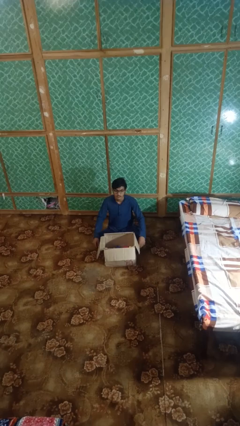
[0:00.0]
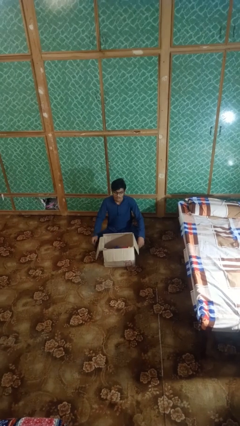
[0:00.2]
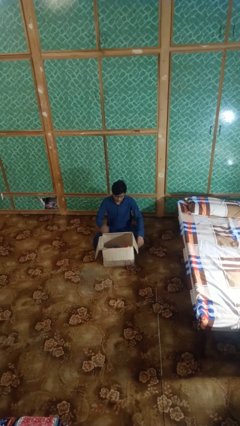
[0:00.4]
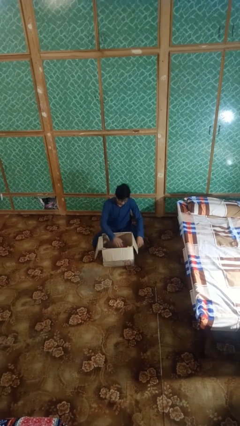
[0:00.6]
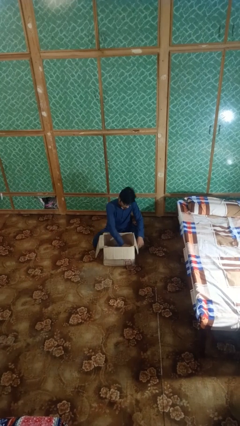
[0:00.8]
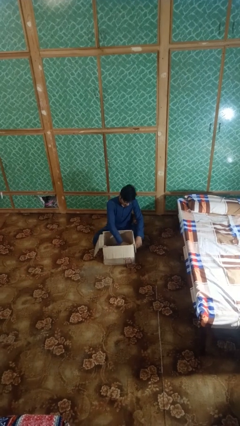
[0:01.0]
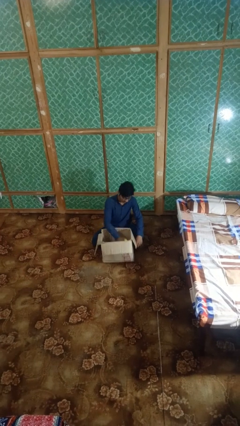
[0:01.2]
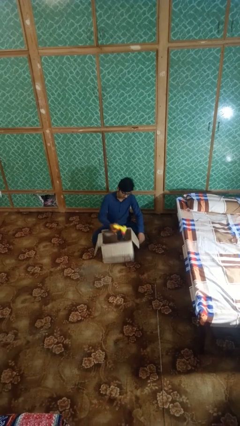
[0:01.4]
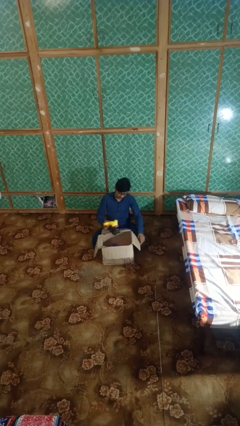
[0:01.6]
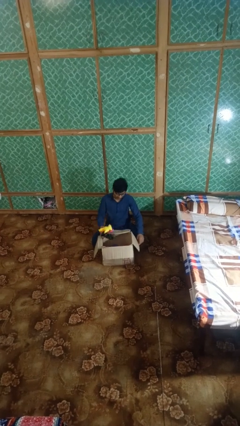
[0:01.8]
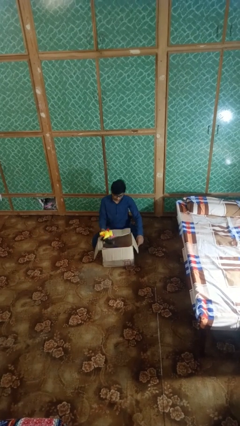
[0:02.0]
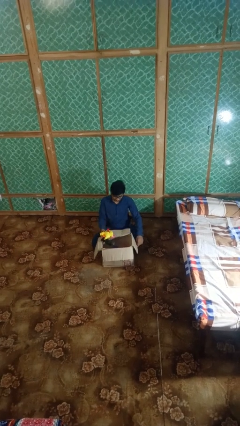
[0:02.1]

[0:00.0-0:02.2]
person takes object from box

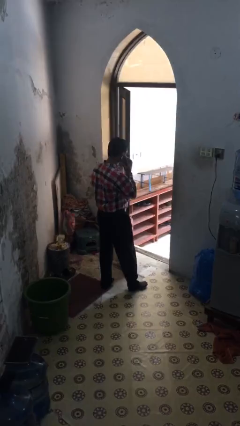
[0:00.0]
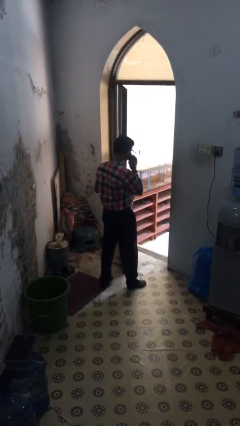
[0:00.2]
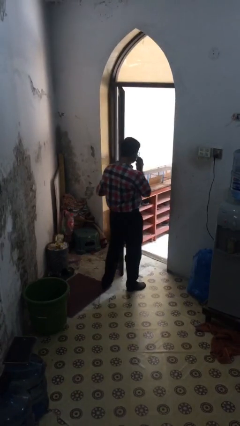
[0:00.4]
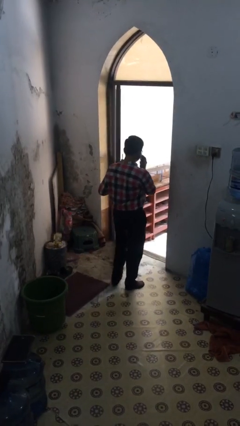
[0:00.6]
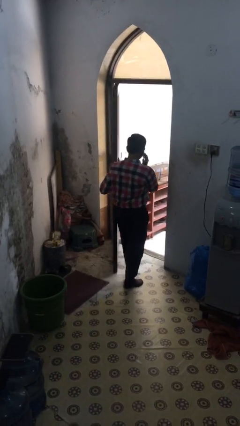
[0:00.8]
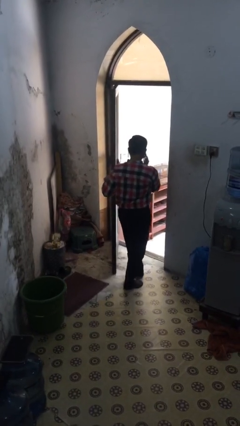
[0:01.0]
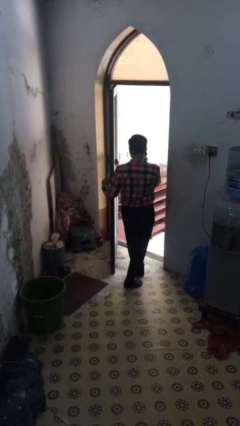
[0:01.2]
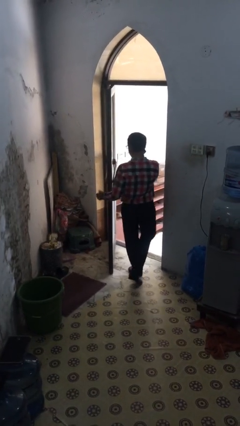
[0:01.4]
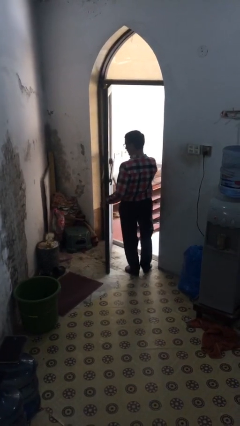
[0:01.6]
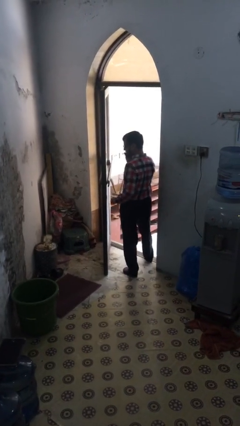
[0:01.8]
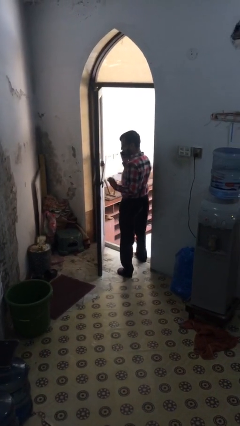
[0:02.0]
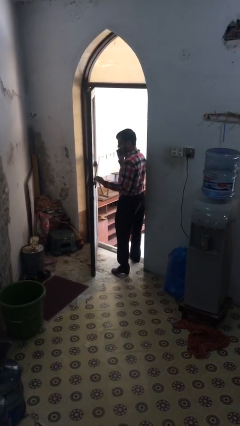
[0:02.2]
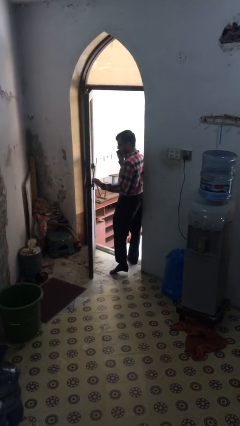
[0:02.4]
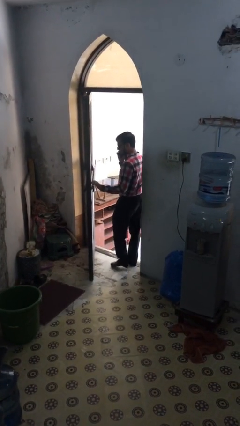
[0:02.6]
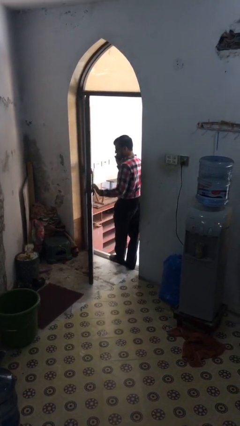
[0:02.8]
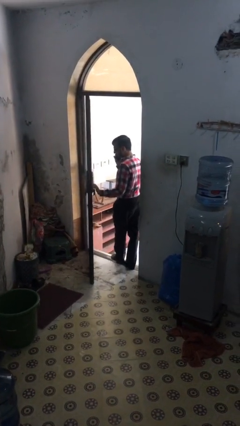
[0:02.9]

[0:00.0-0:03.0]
person exits scene through structure

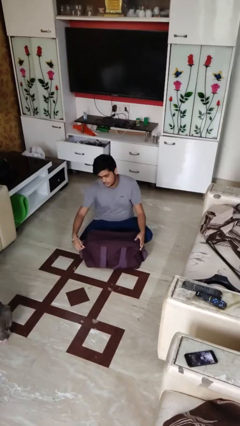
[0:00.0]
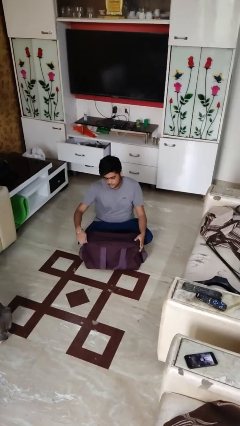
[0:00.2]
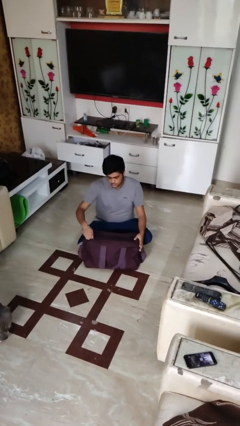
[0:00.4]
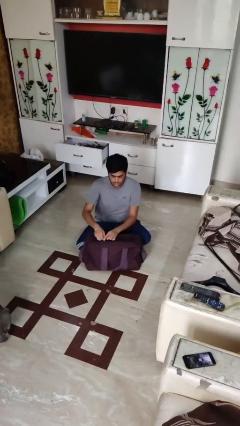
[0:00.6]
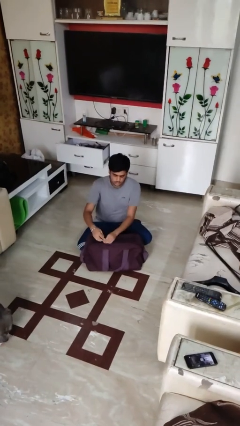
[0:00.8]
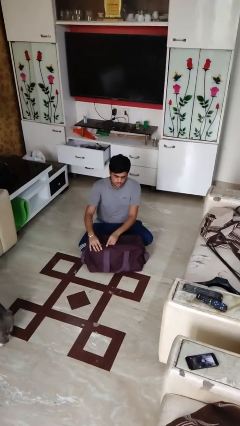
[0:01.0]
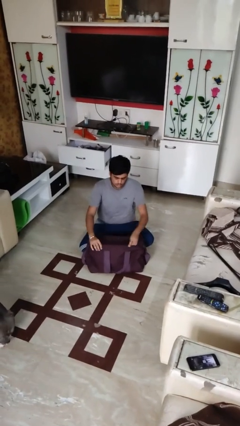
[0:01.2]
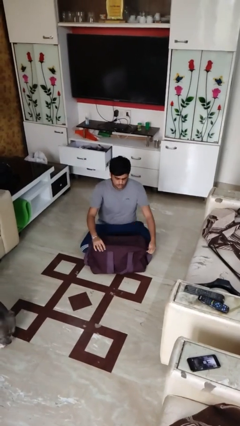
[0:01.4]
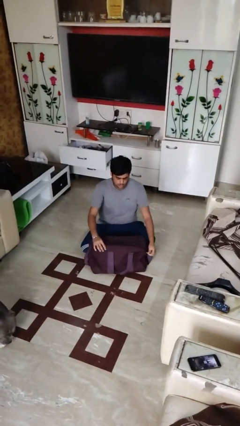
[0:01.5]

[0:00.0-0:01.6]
person opens suitcase

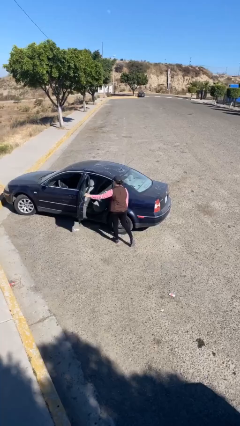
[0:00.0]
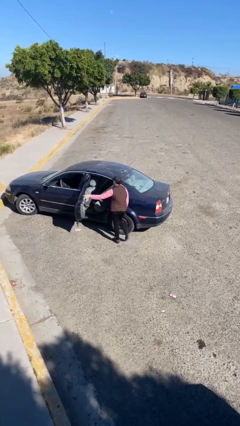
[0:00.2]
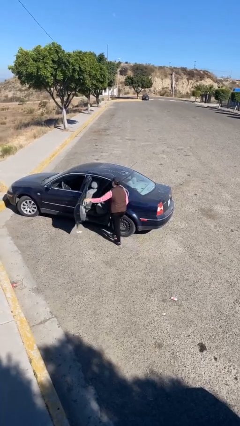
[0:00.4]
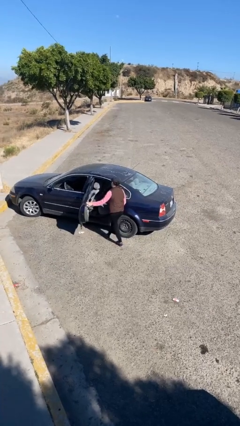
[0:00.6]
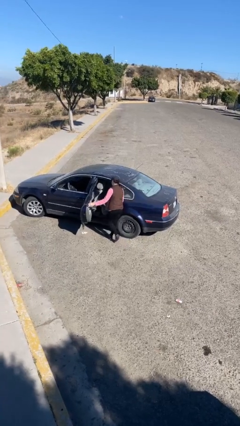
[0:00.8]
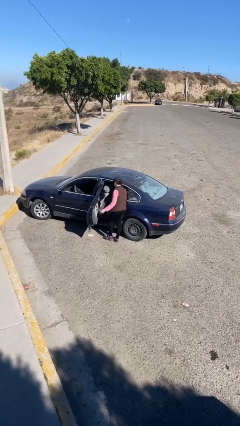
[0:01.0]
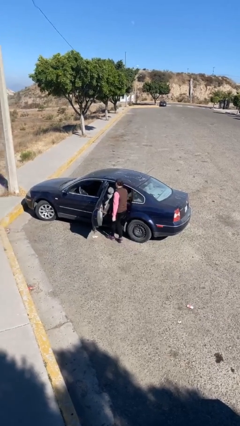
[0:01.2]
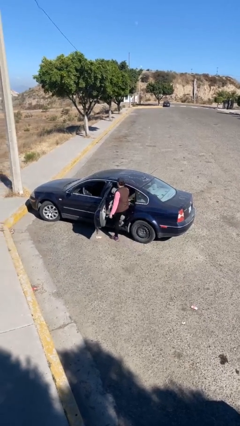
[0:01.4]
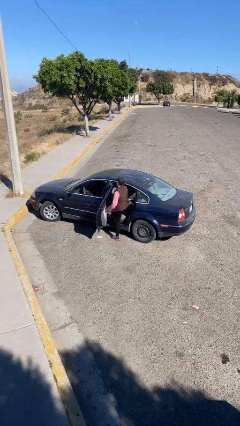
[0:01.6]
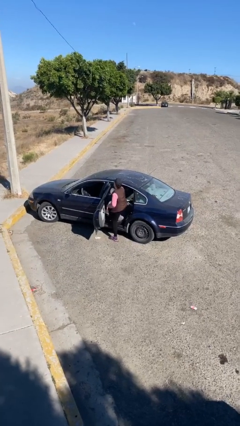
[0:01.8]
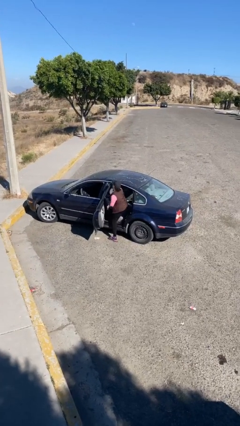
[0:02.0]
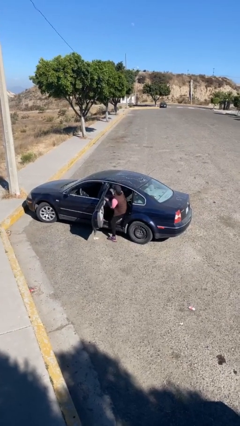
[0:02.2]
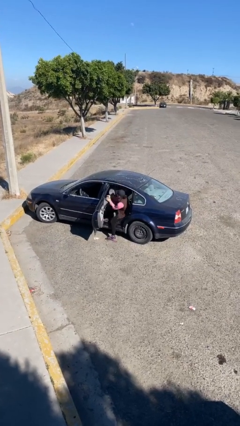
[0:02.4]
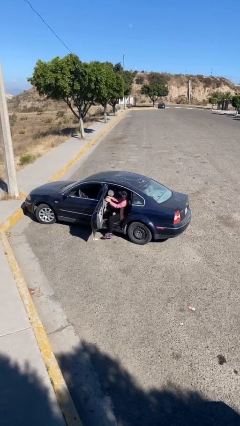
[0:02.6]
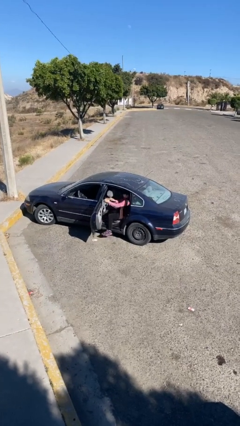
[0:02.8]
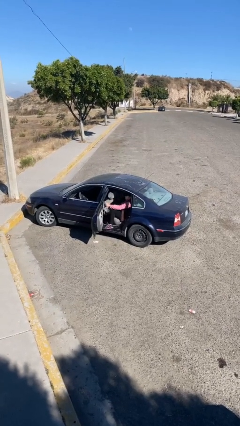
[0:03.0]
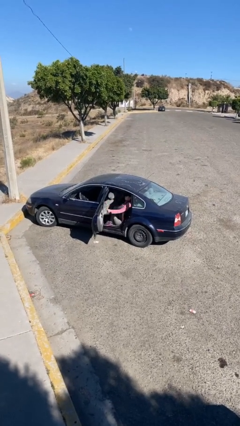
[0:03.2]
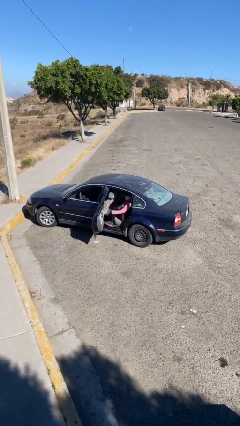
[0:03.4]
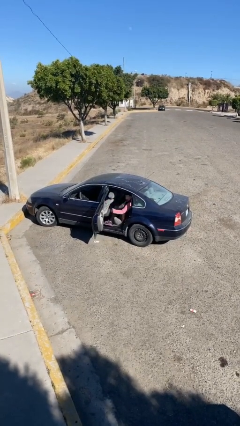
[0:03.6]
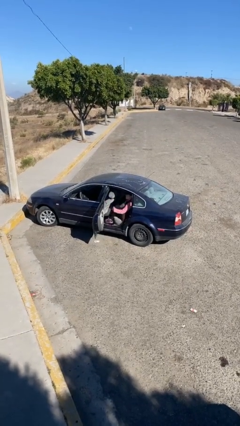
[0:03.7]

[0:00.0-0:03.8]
person enters car

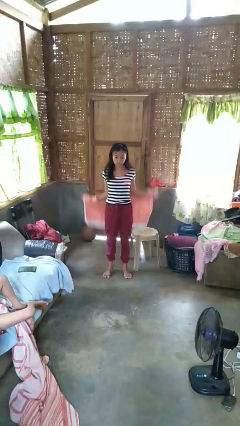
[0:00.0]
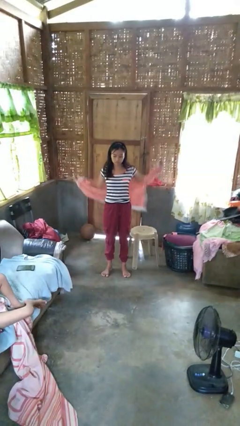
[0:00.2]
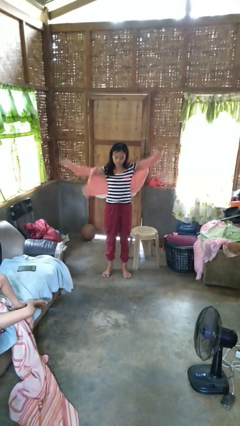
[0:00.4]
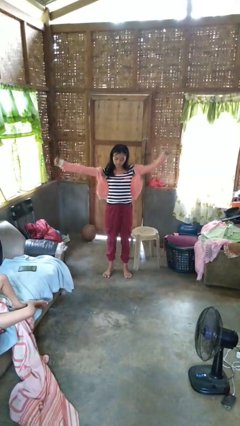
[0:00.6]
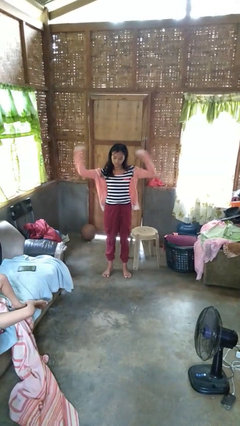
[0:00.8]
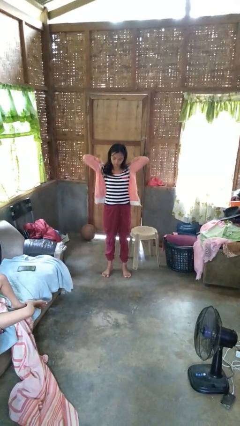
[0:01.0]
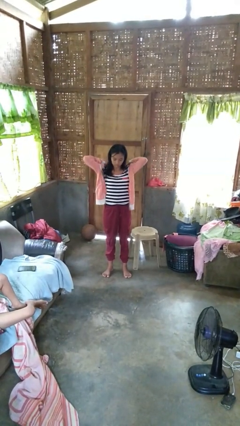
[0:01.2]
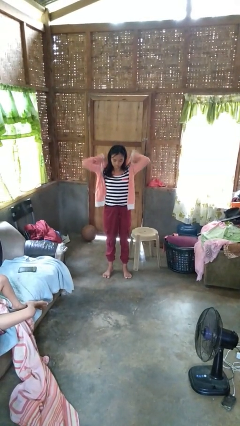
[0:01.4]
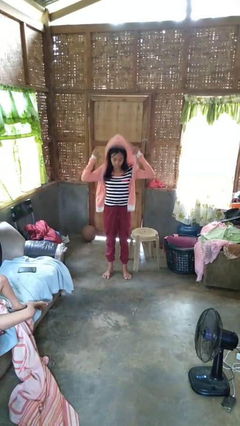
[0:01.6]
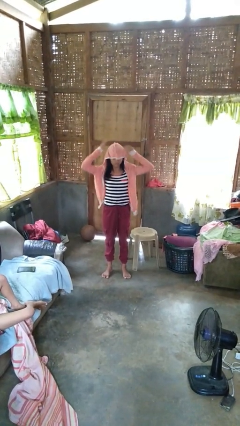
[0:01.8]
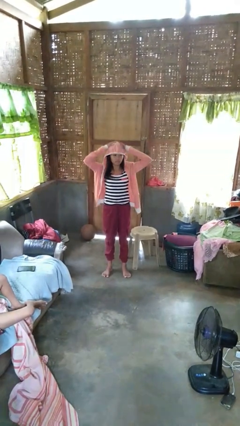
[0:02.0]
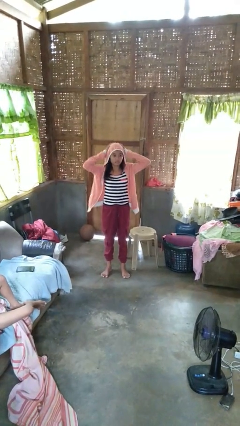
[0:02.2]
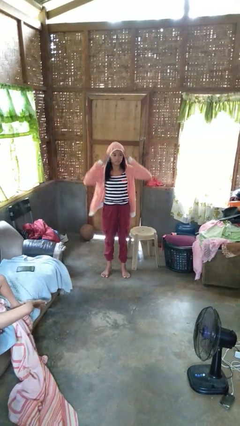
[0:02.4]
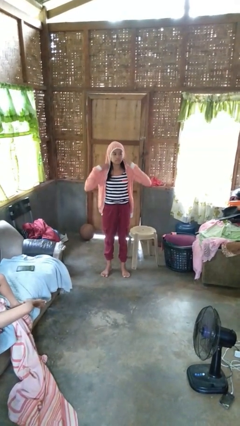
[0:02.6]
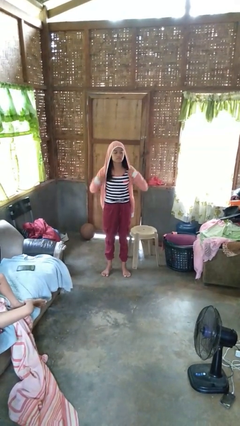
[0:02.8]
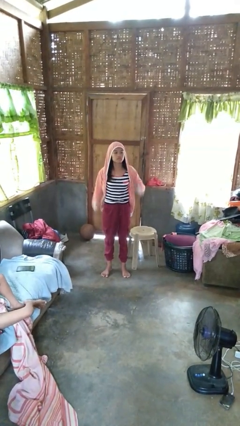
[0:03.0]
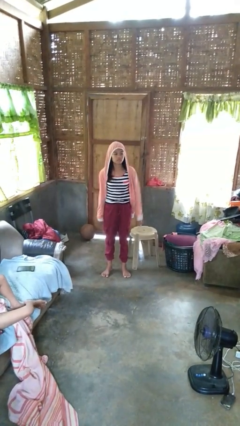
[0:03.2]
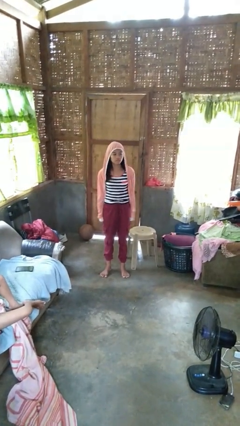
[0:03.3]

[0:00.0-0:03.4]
person puts on hoodie

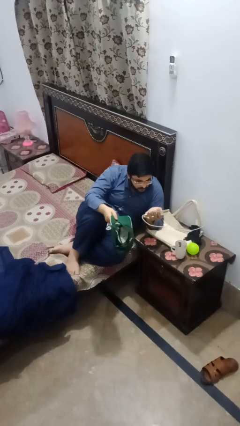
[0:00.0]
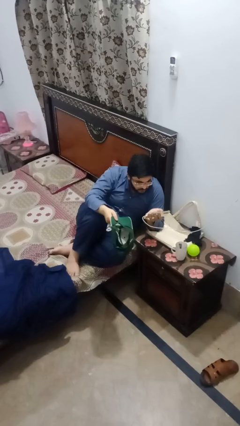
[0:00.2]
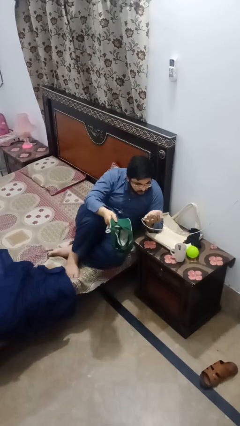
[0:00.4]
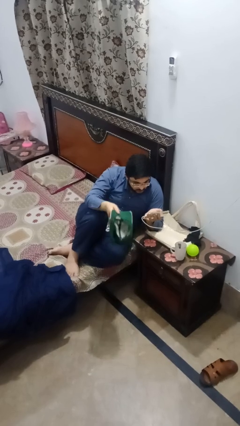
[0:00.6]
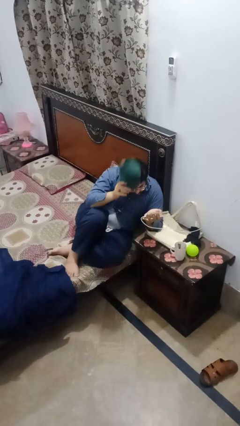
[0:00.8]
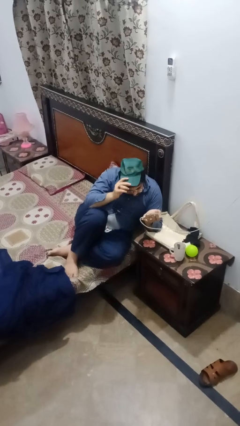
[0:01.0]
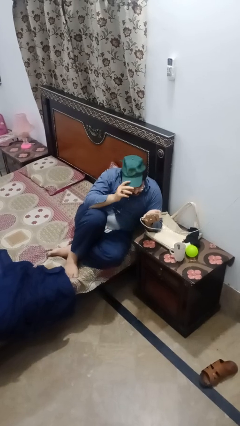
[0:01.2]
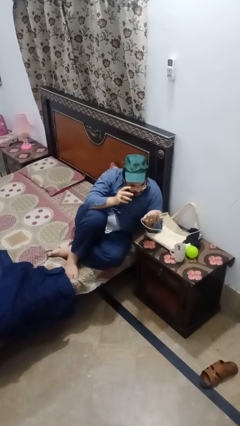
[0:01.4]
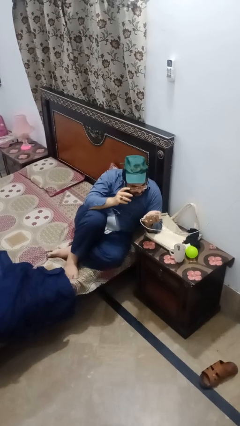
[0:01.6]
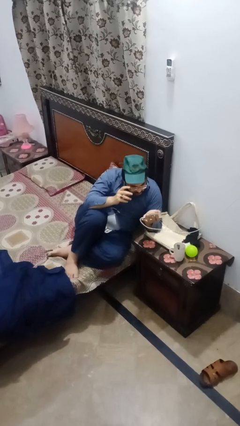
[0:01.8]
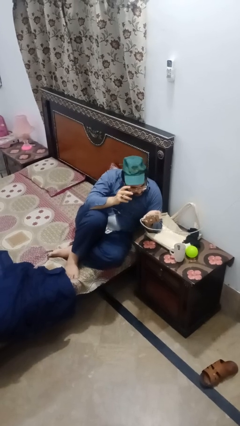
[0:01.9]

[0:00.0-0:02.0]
person puts on hat

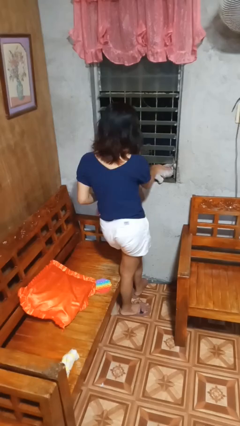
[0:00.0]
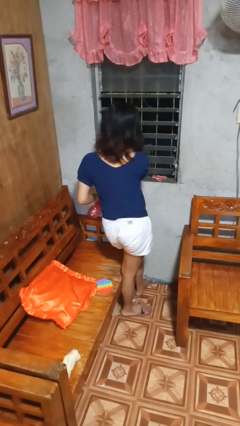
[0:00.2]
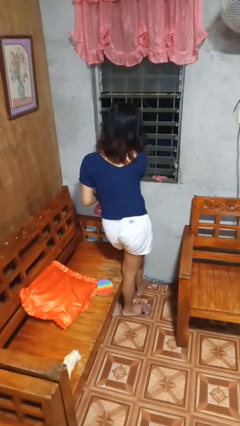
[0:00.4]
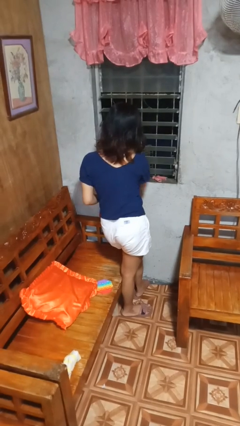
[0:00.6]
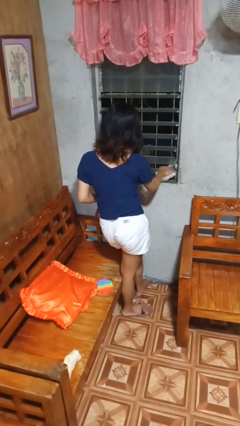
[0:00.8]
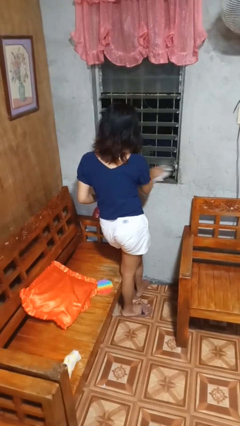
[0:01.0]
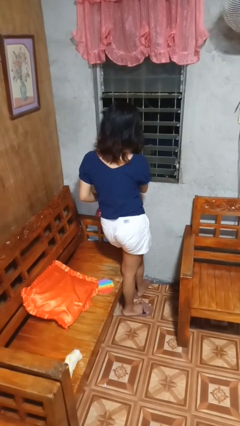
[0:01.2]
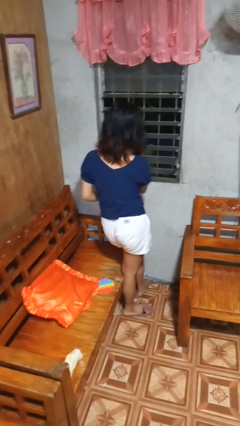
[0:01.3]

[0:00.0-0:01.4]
person washes window
